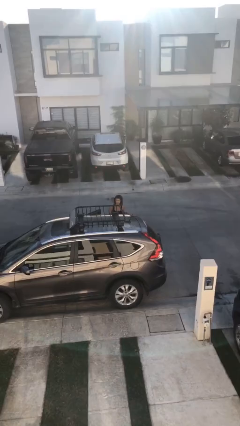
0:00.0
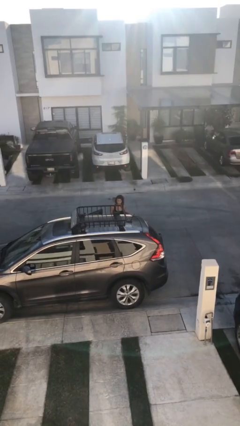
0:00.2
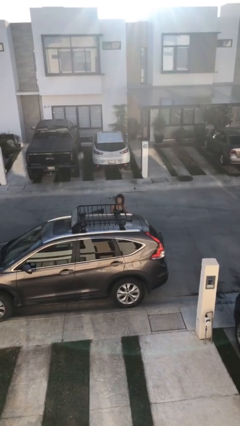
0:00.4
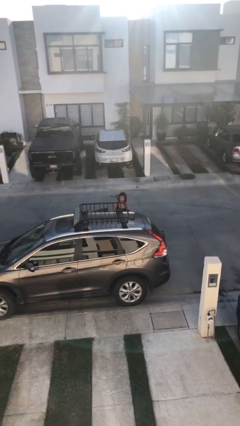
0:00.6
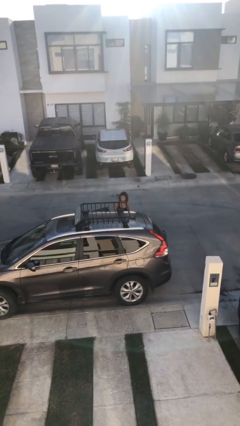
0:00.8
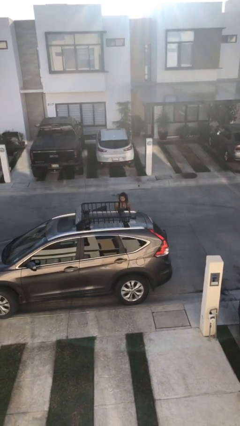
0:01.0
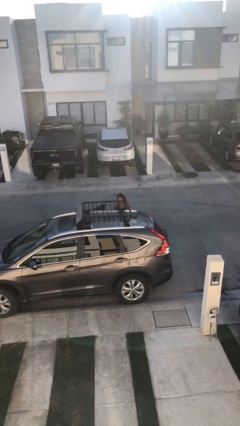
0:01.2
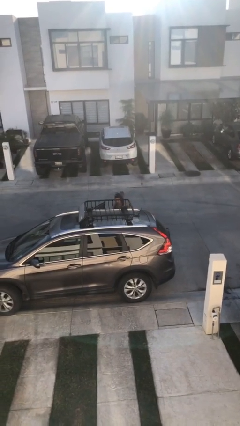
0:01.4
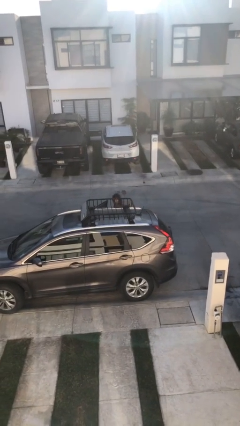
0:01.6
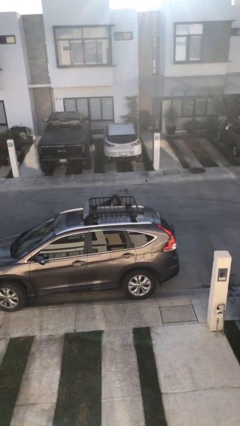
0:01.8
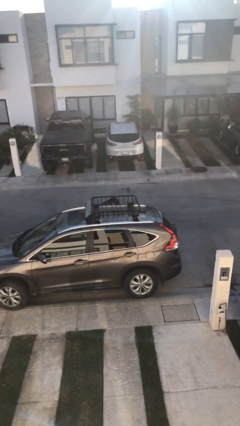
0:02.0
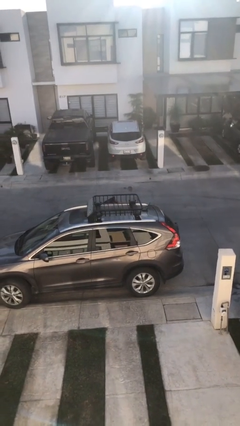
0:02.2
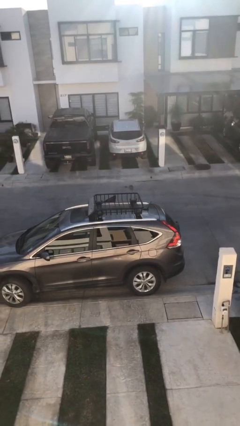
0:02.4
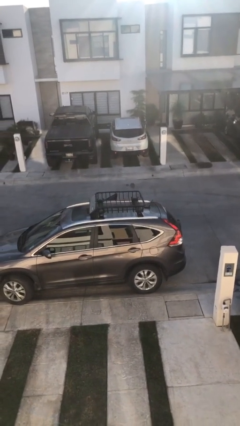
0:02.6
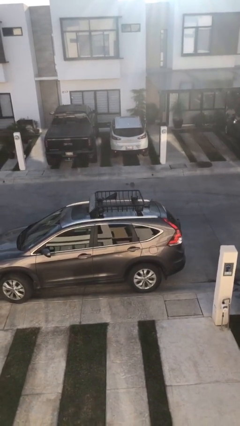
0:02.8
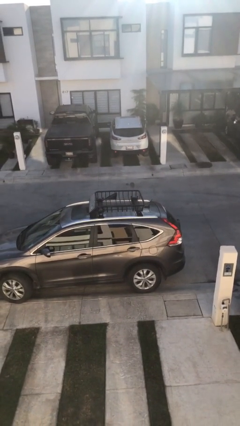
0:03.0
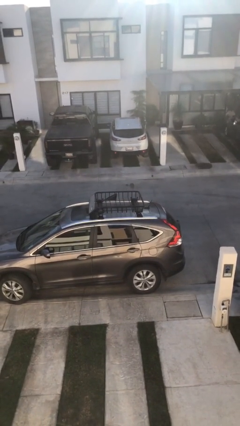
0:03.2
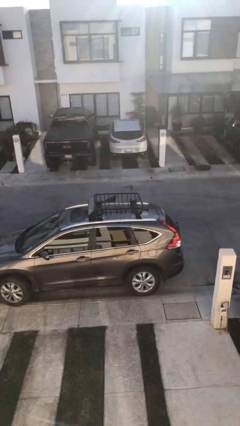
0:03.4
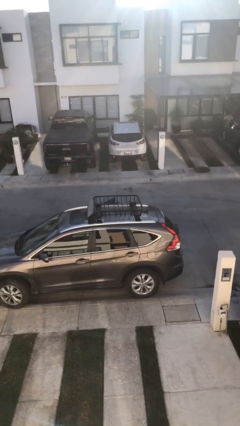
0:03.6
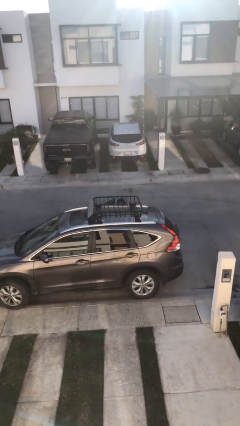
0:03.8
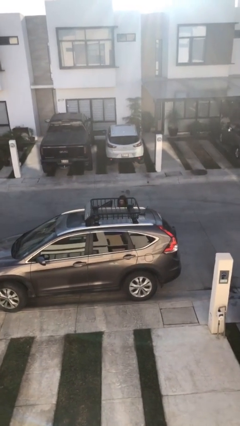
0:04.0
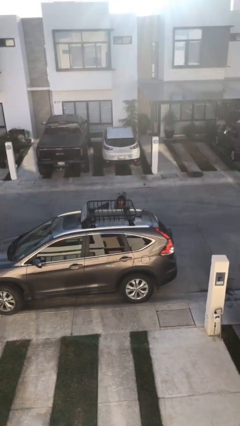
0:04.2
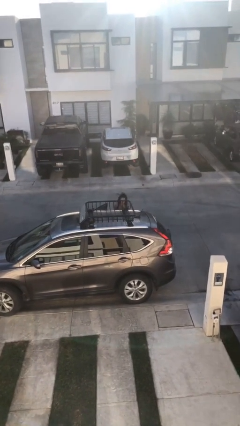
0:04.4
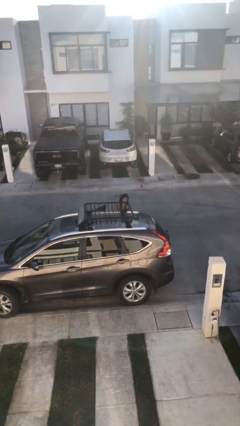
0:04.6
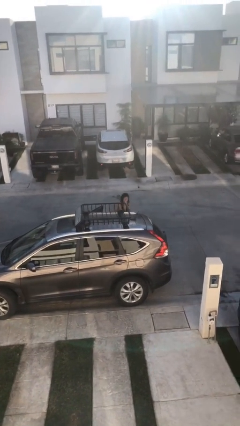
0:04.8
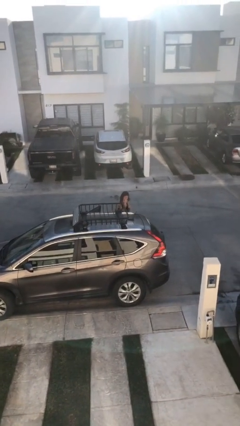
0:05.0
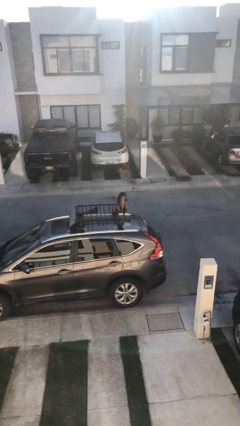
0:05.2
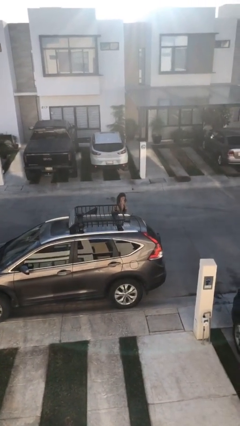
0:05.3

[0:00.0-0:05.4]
person loads car

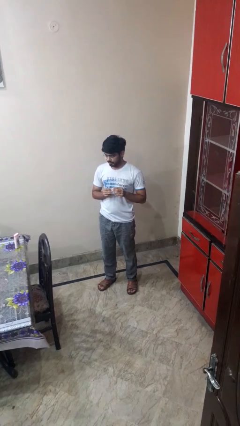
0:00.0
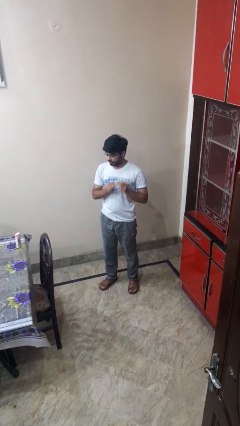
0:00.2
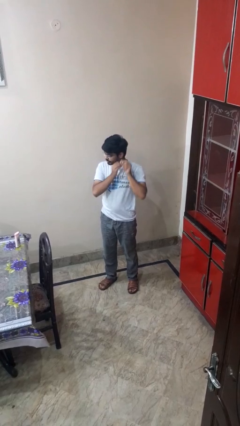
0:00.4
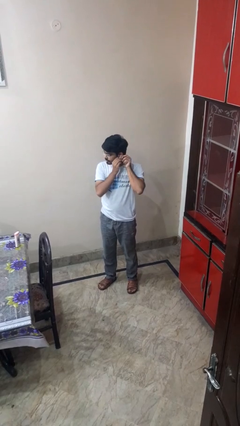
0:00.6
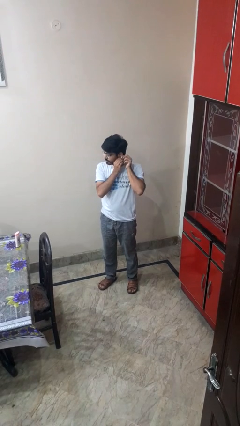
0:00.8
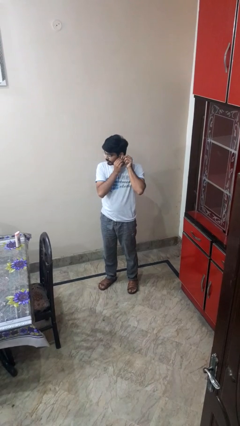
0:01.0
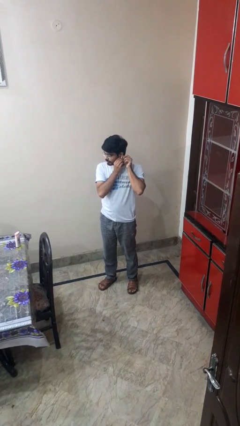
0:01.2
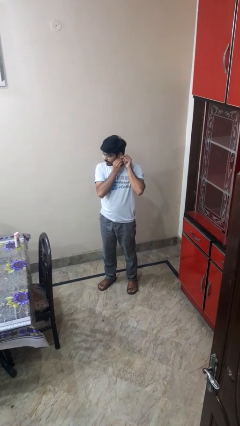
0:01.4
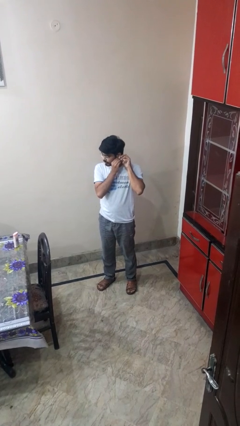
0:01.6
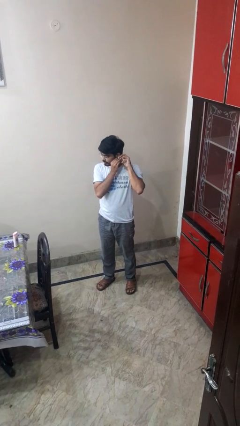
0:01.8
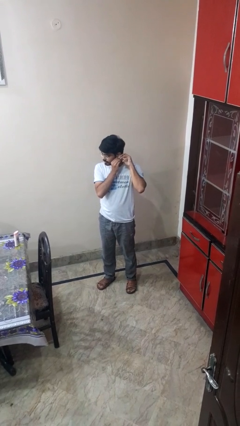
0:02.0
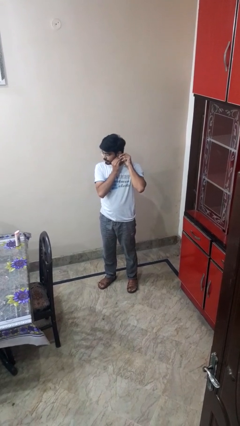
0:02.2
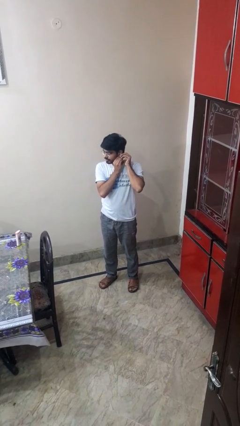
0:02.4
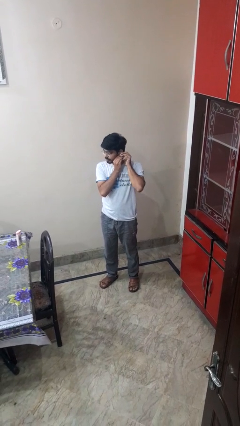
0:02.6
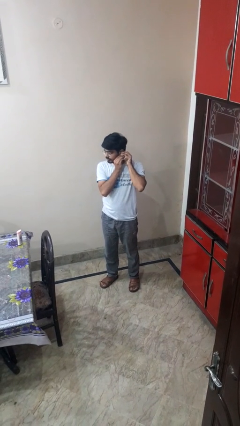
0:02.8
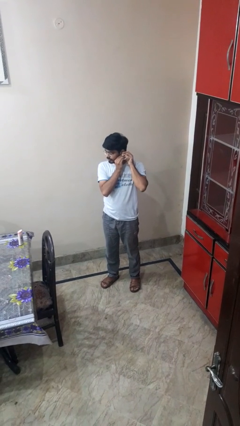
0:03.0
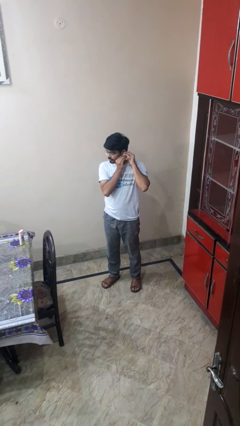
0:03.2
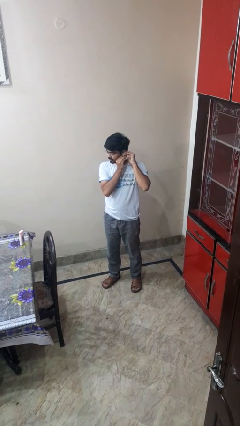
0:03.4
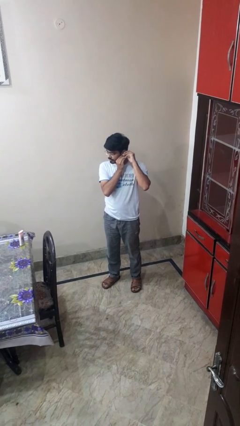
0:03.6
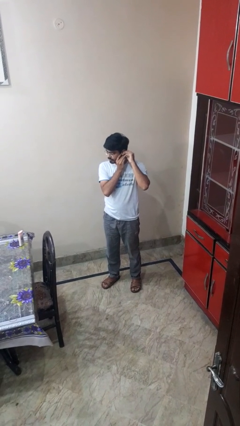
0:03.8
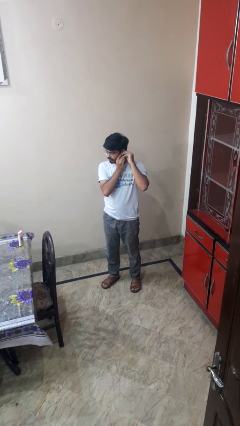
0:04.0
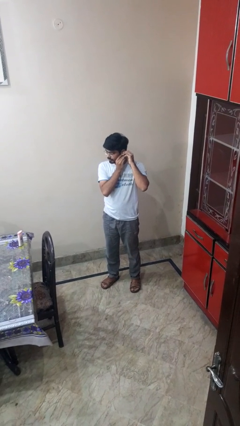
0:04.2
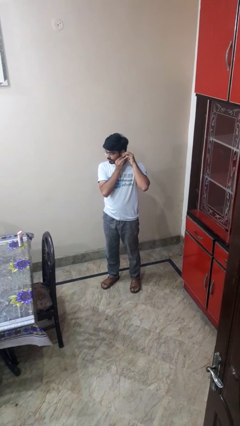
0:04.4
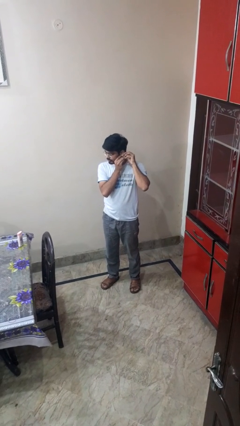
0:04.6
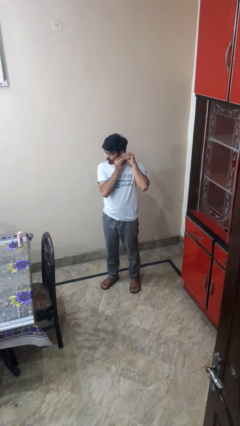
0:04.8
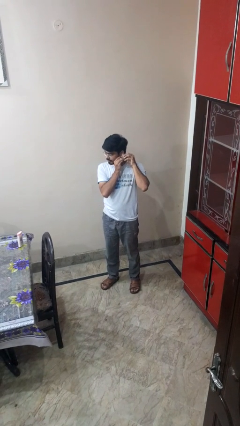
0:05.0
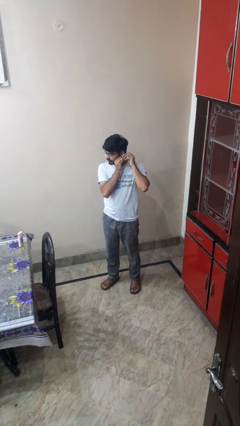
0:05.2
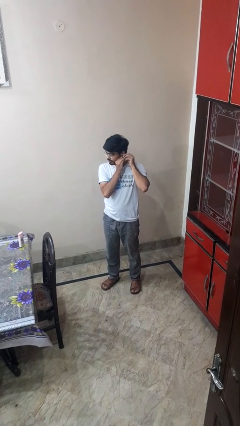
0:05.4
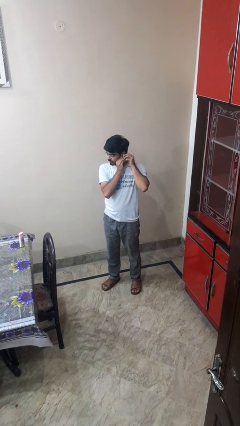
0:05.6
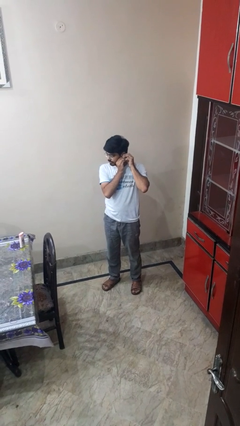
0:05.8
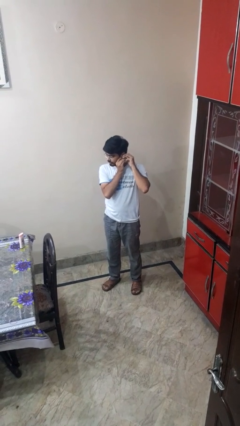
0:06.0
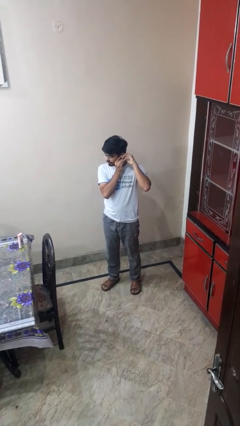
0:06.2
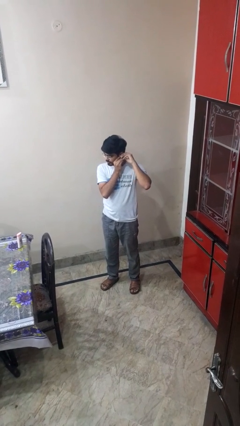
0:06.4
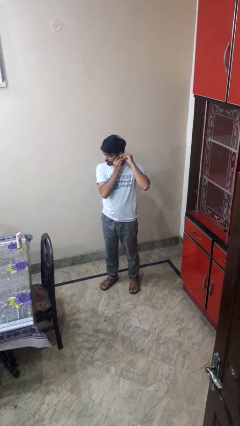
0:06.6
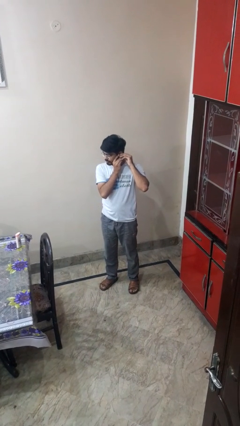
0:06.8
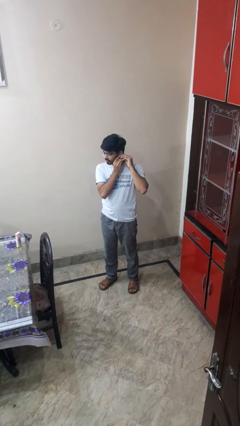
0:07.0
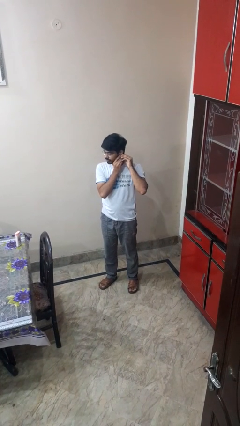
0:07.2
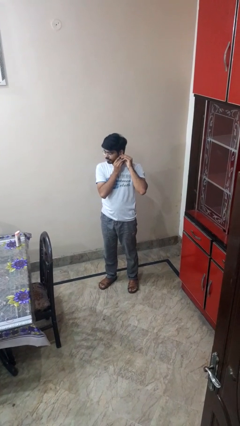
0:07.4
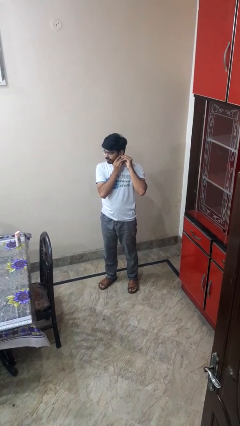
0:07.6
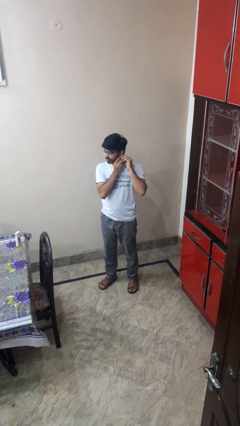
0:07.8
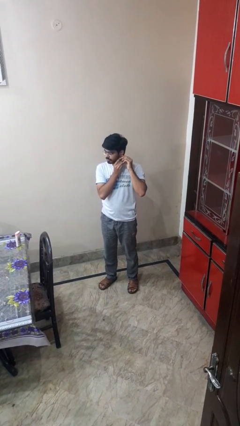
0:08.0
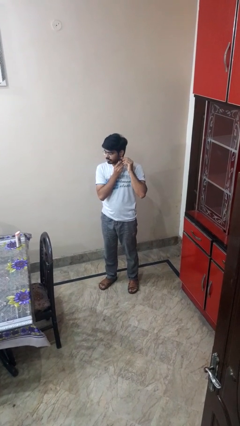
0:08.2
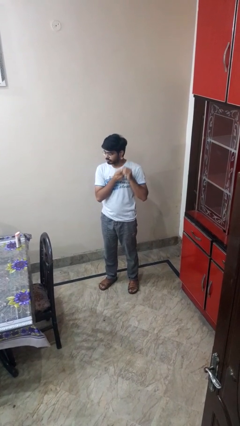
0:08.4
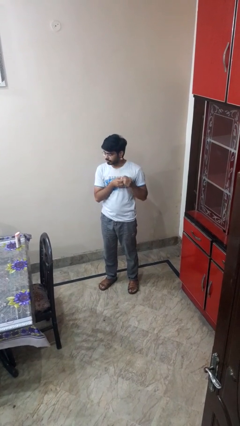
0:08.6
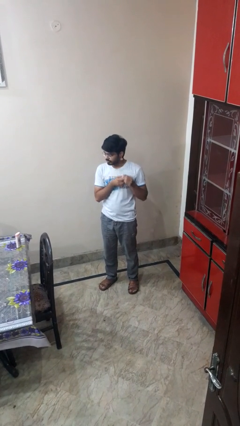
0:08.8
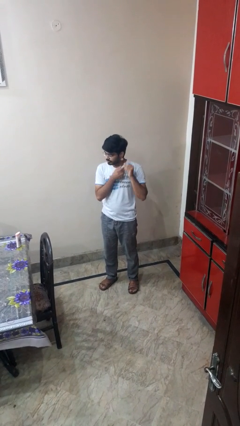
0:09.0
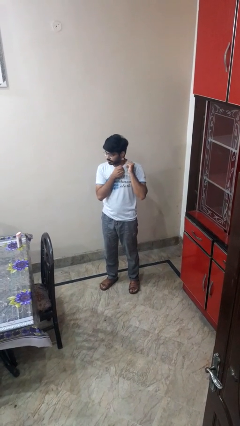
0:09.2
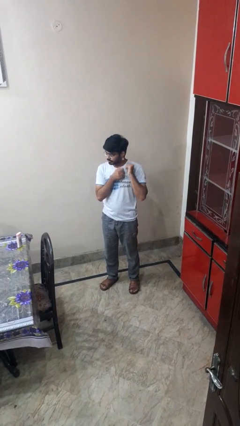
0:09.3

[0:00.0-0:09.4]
person puts on earrings

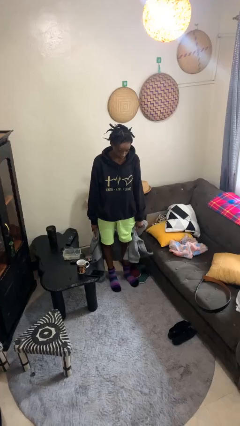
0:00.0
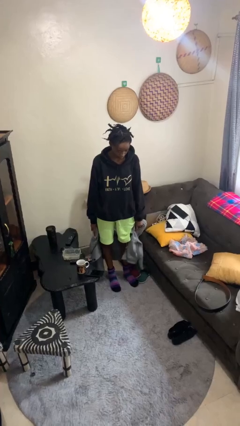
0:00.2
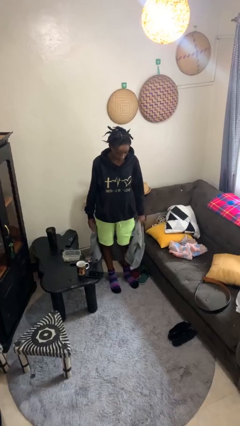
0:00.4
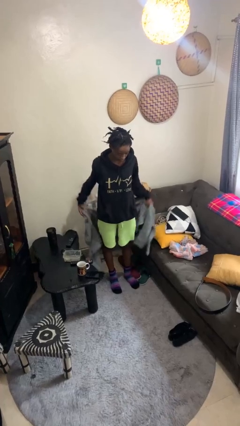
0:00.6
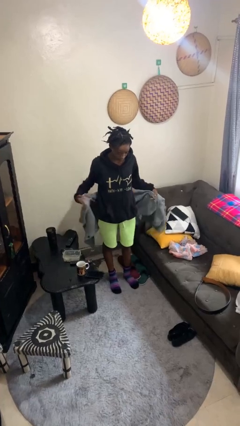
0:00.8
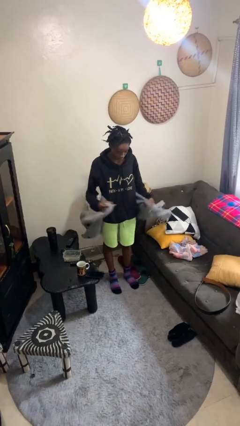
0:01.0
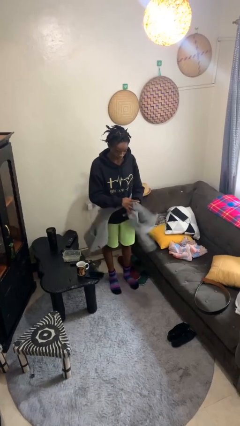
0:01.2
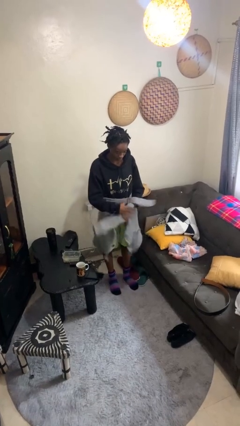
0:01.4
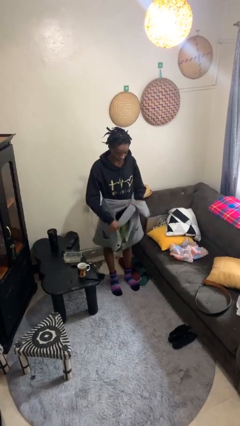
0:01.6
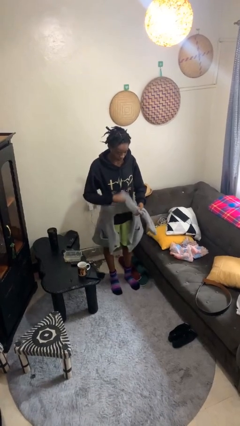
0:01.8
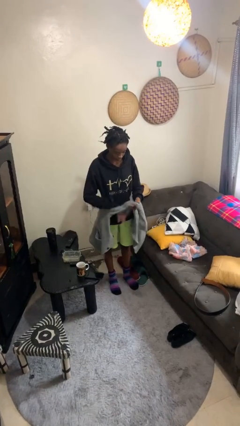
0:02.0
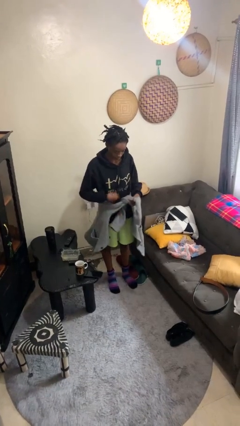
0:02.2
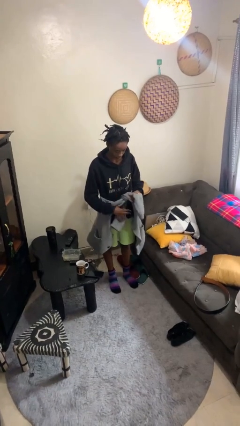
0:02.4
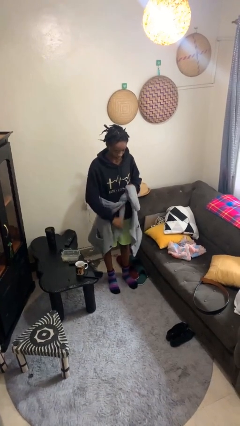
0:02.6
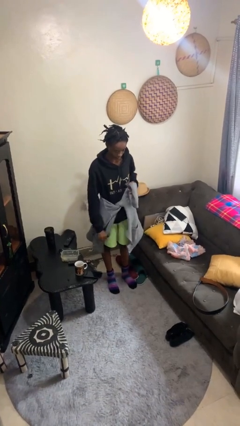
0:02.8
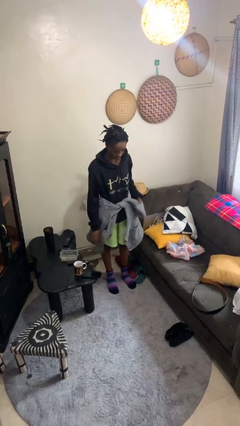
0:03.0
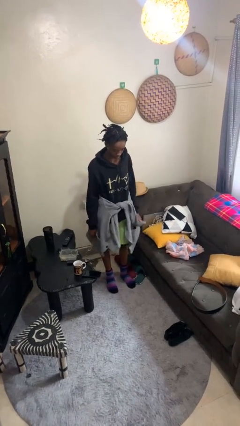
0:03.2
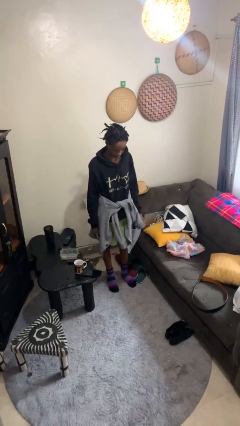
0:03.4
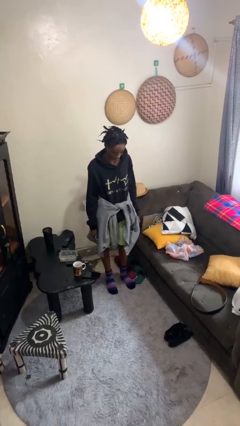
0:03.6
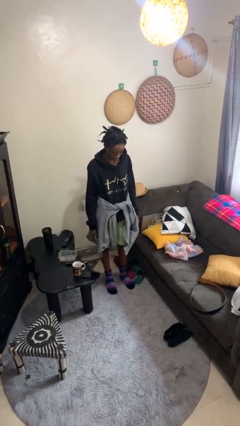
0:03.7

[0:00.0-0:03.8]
person ties jacket around waist
